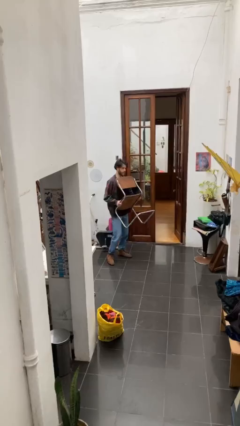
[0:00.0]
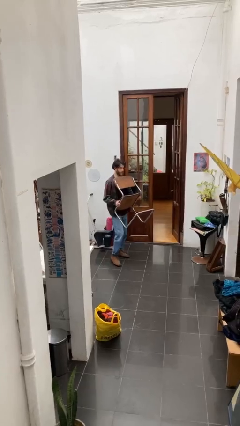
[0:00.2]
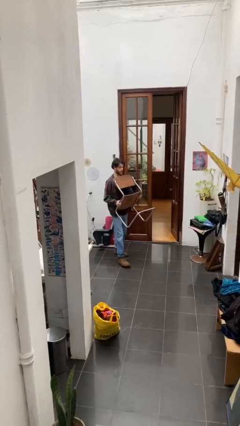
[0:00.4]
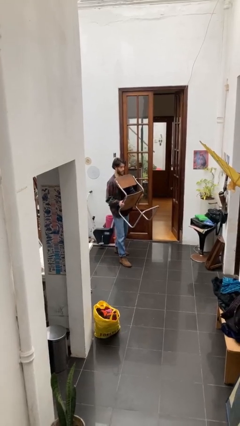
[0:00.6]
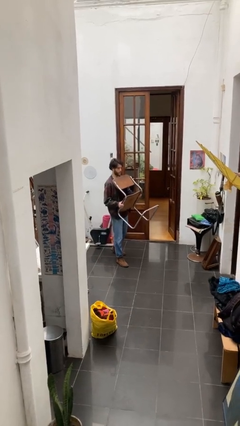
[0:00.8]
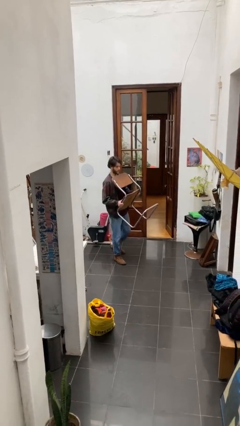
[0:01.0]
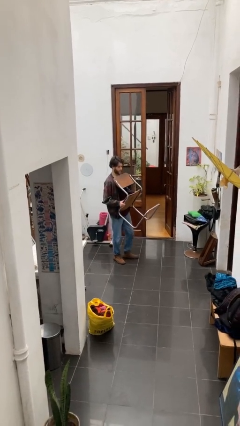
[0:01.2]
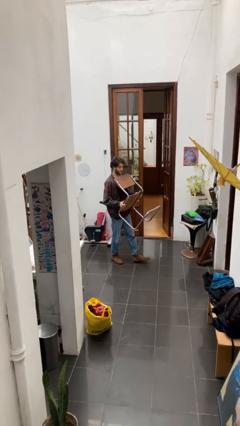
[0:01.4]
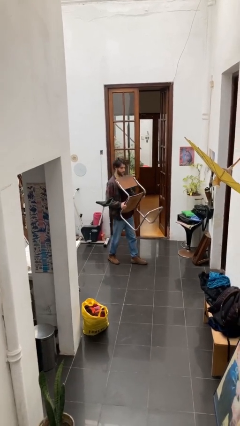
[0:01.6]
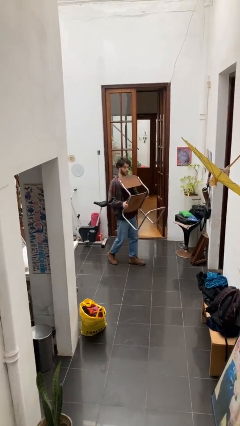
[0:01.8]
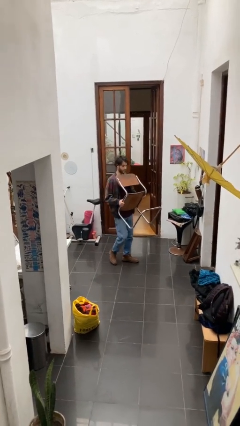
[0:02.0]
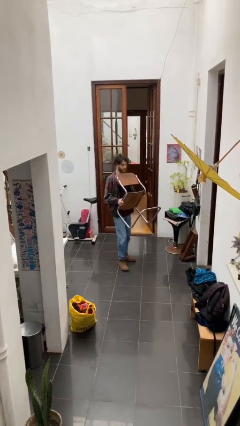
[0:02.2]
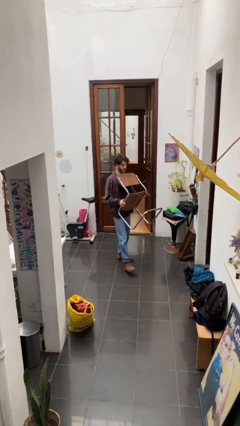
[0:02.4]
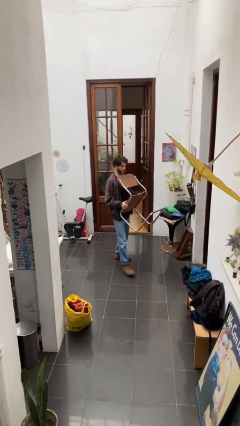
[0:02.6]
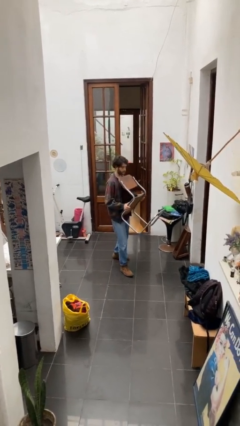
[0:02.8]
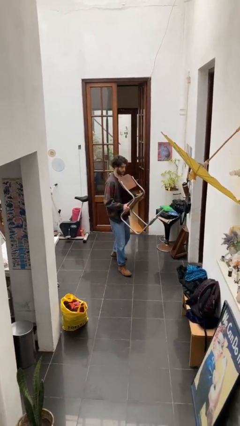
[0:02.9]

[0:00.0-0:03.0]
person carries heavy object

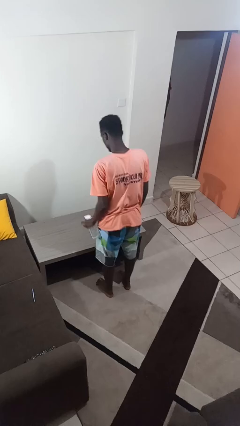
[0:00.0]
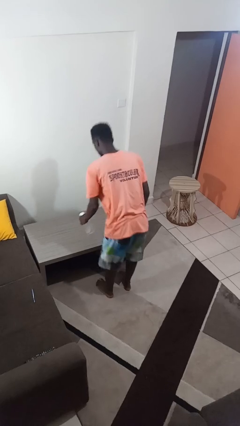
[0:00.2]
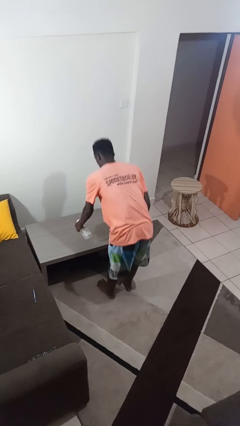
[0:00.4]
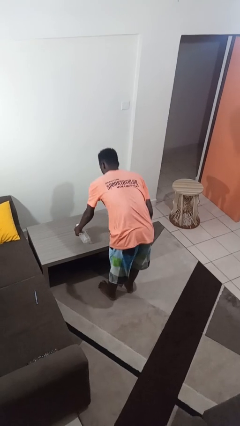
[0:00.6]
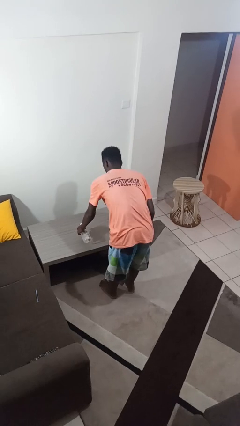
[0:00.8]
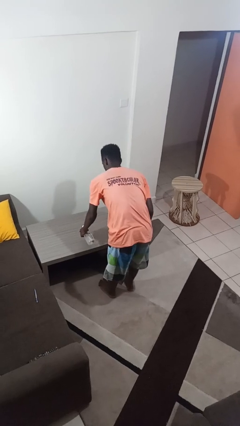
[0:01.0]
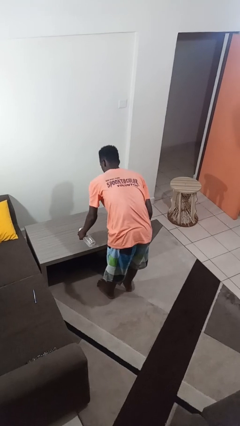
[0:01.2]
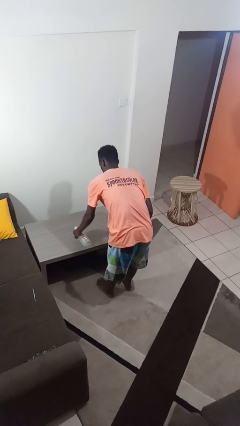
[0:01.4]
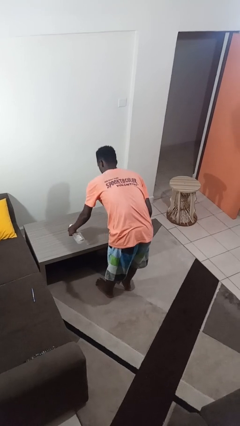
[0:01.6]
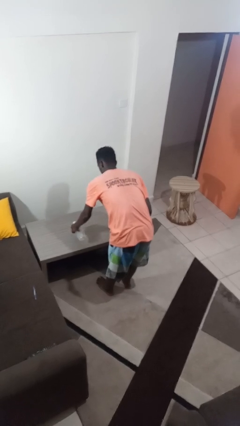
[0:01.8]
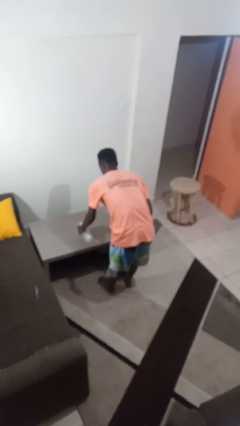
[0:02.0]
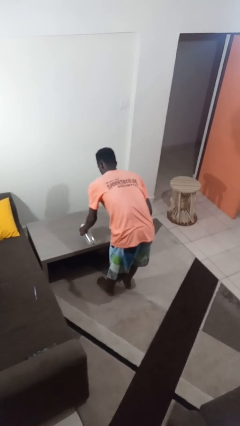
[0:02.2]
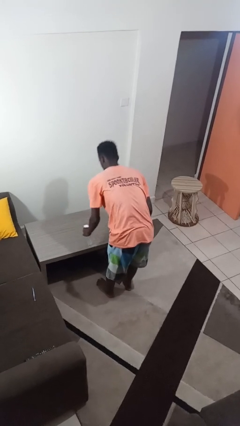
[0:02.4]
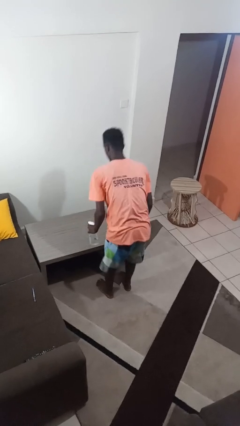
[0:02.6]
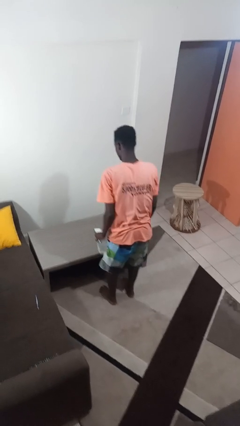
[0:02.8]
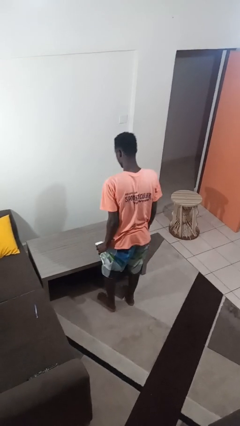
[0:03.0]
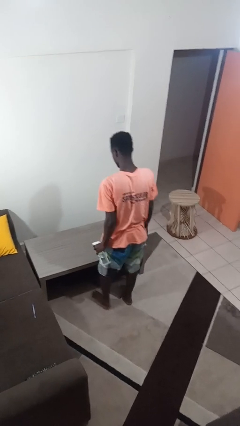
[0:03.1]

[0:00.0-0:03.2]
person sprays from bottle

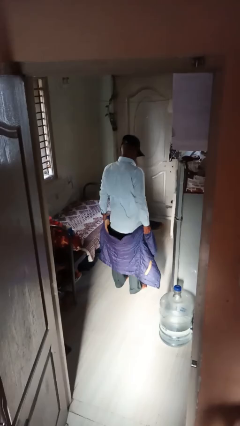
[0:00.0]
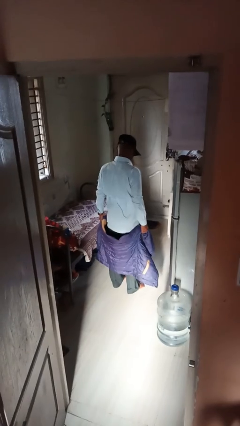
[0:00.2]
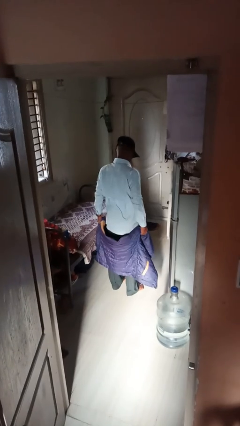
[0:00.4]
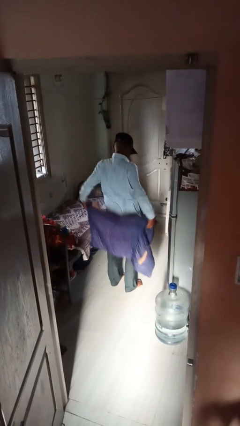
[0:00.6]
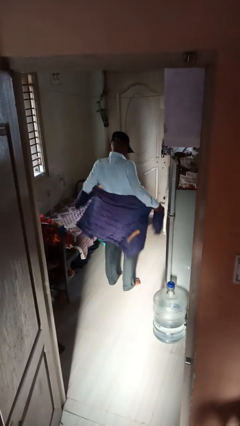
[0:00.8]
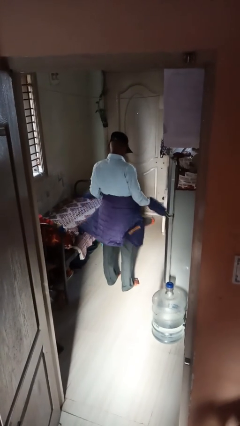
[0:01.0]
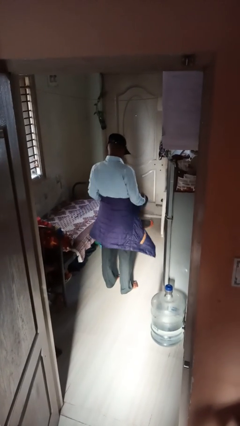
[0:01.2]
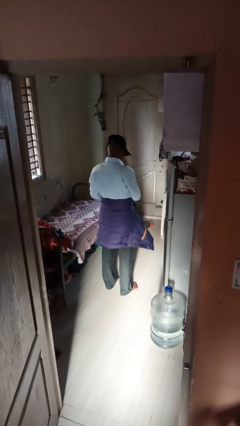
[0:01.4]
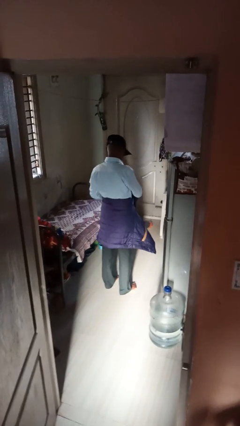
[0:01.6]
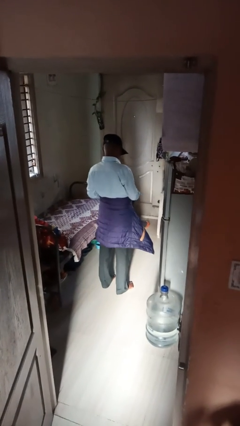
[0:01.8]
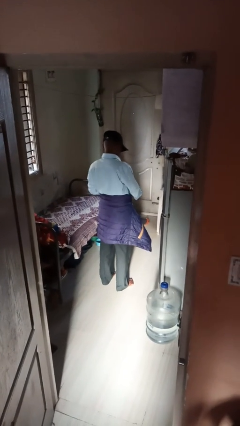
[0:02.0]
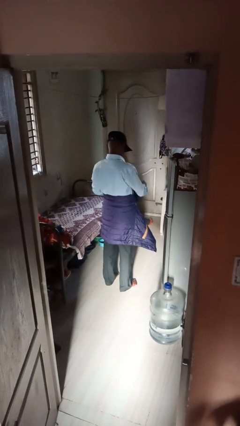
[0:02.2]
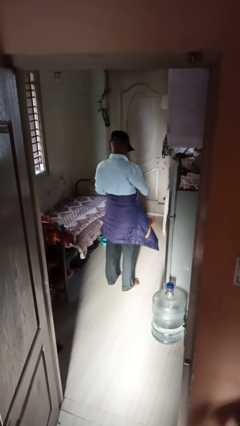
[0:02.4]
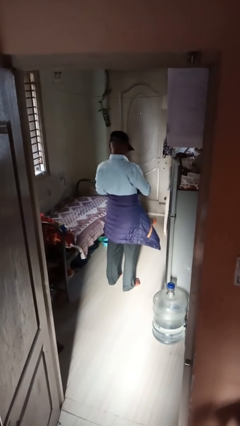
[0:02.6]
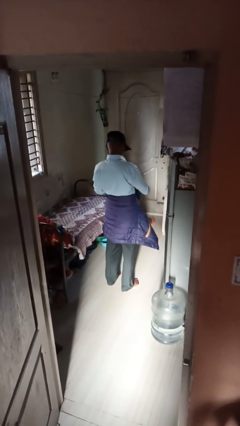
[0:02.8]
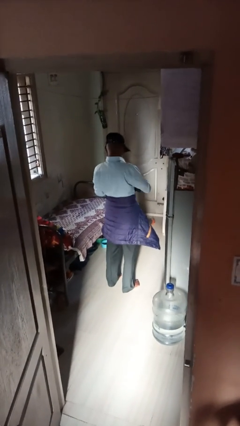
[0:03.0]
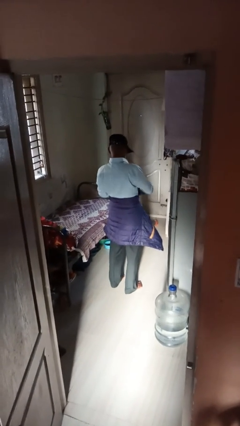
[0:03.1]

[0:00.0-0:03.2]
person ties jacket around waist

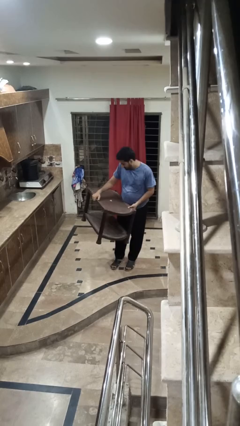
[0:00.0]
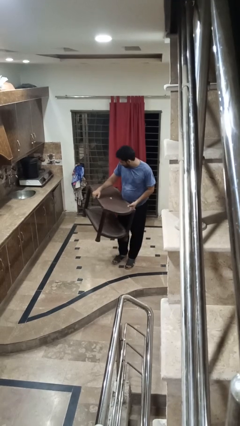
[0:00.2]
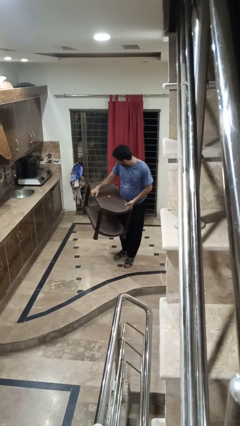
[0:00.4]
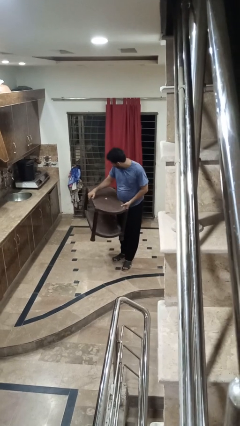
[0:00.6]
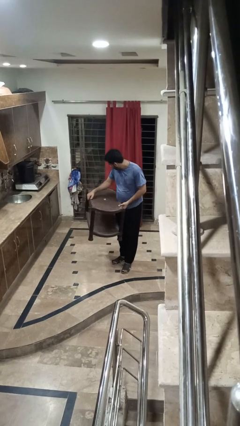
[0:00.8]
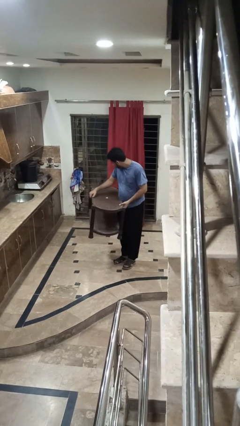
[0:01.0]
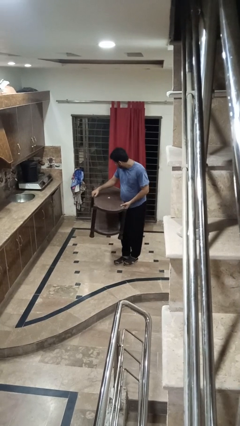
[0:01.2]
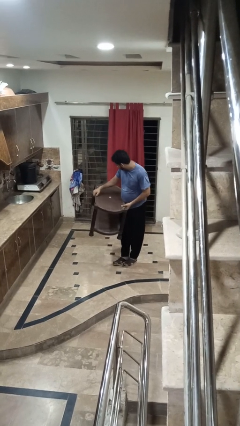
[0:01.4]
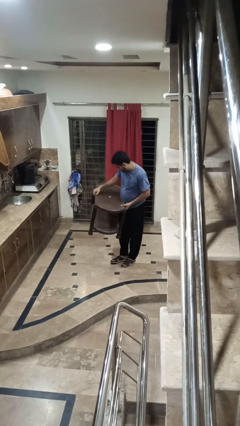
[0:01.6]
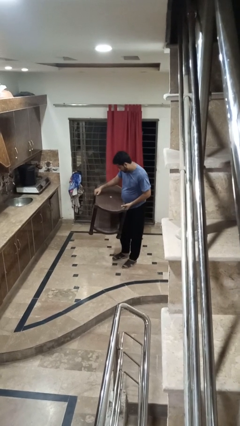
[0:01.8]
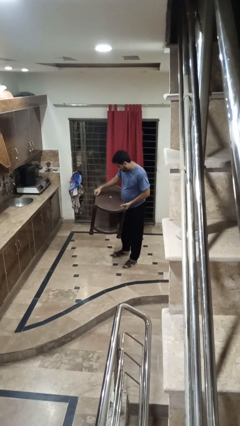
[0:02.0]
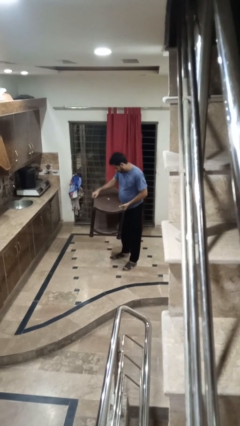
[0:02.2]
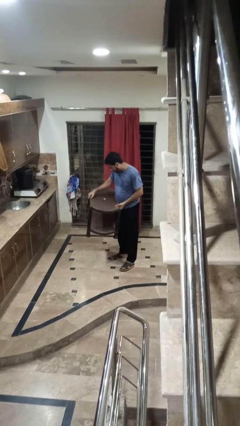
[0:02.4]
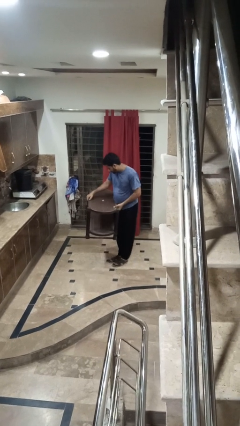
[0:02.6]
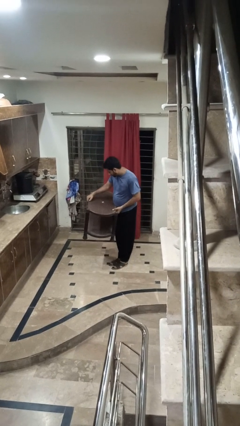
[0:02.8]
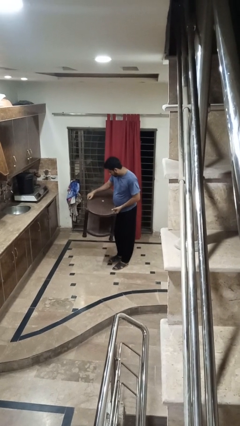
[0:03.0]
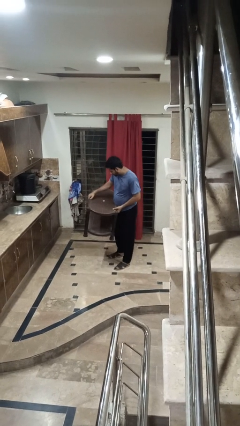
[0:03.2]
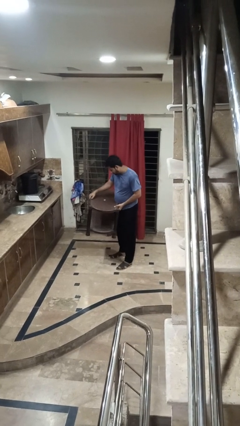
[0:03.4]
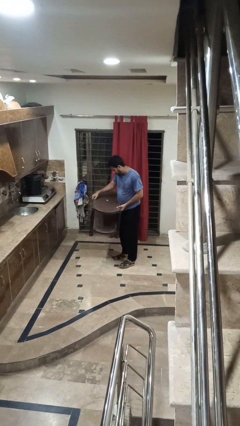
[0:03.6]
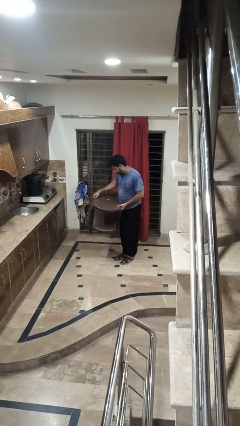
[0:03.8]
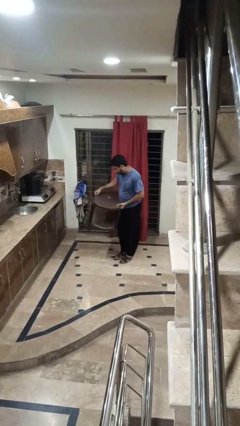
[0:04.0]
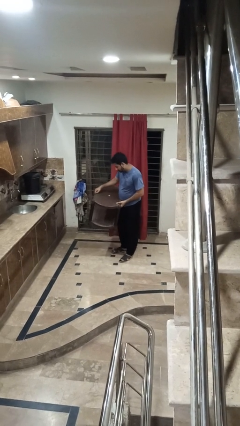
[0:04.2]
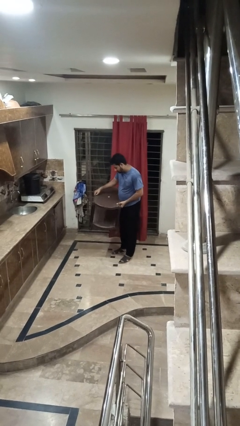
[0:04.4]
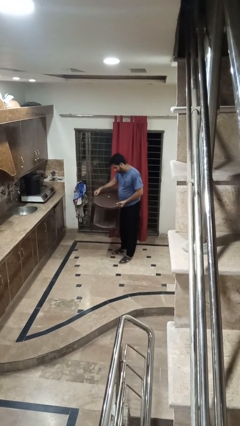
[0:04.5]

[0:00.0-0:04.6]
person carries furniture

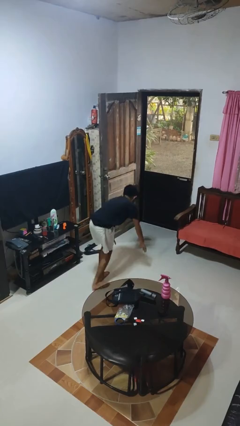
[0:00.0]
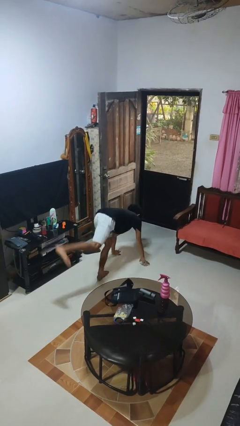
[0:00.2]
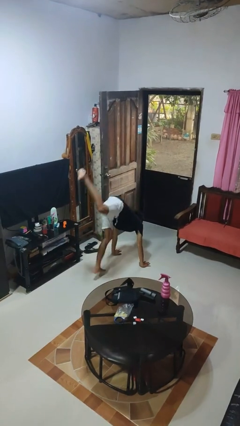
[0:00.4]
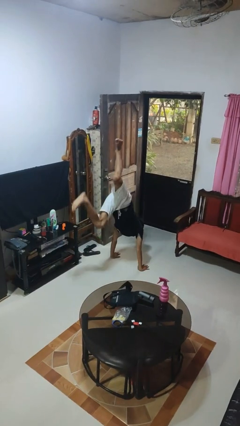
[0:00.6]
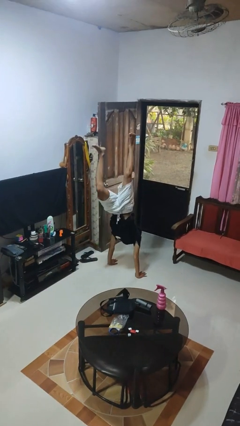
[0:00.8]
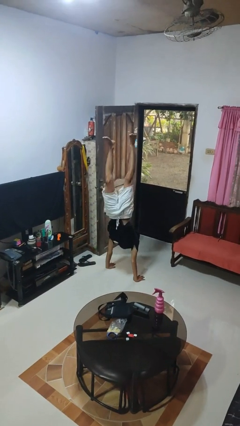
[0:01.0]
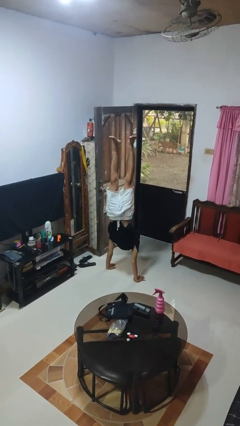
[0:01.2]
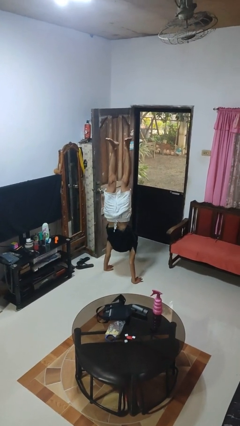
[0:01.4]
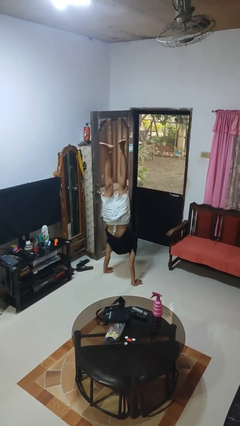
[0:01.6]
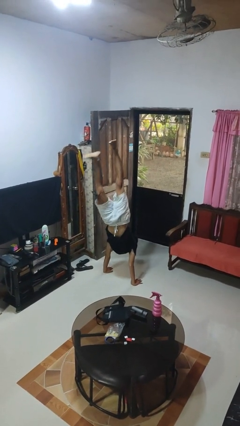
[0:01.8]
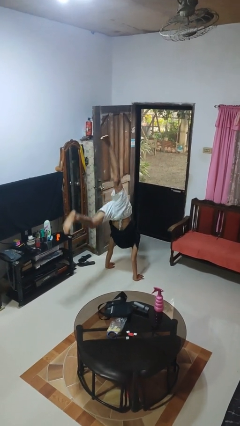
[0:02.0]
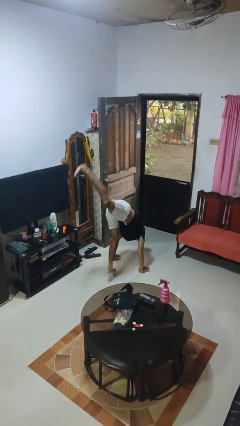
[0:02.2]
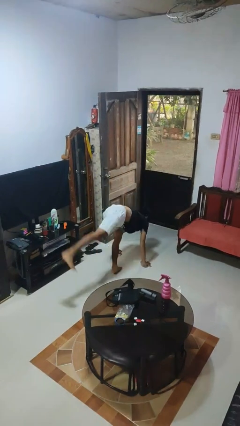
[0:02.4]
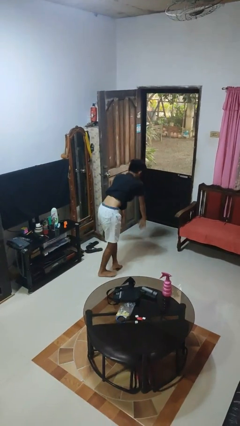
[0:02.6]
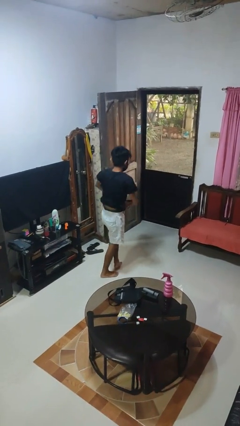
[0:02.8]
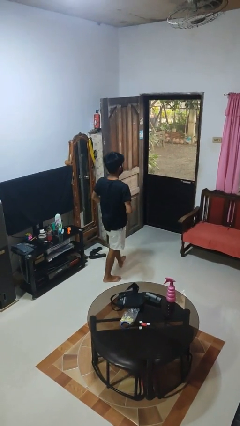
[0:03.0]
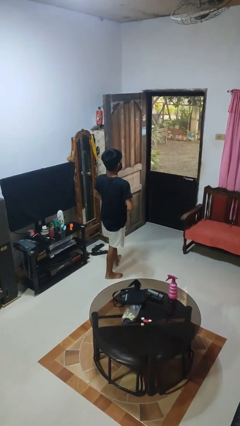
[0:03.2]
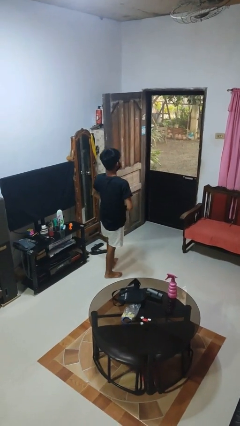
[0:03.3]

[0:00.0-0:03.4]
person handstand
